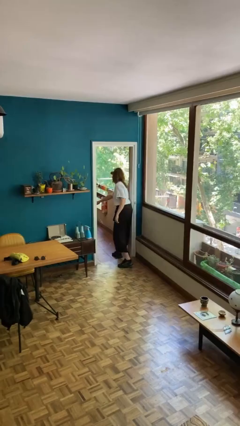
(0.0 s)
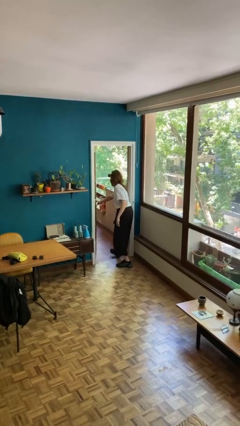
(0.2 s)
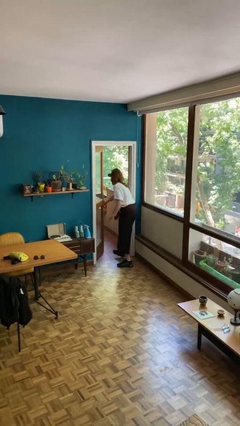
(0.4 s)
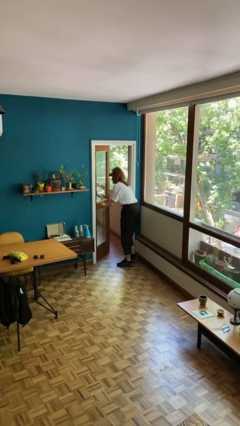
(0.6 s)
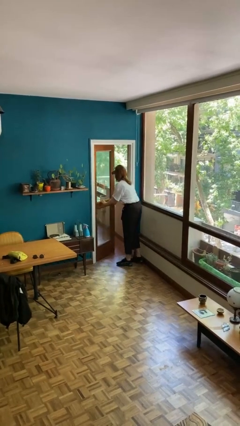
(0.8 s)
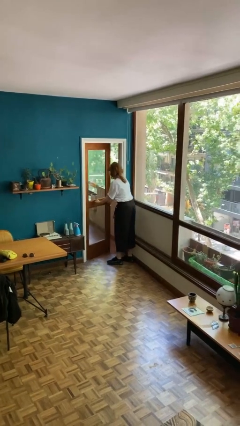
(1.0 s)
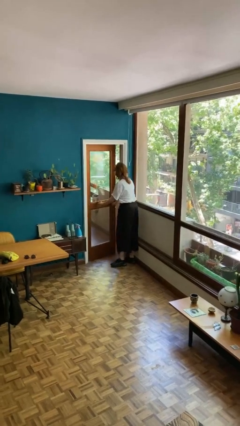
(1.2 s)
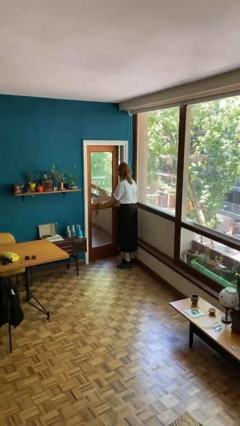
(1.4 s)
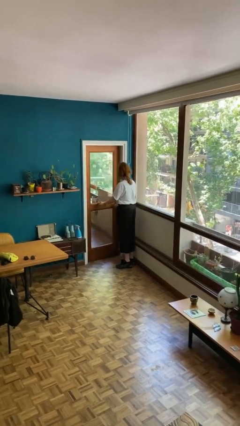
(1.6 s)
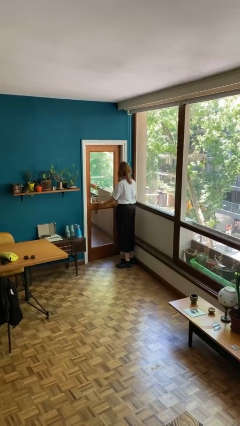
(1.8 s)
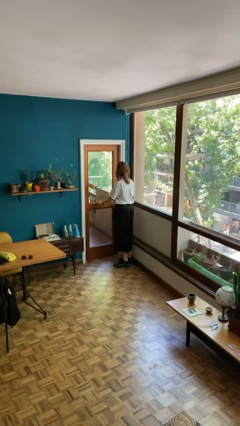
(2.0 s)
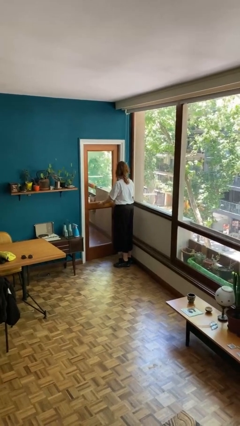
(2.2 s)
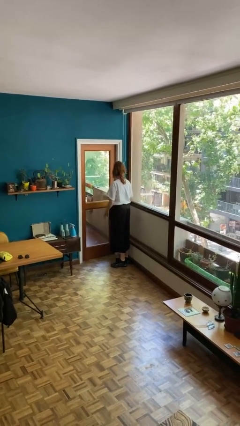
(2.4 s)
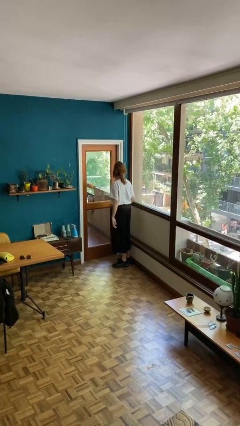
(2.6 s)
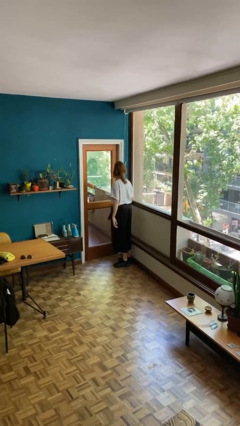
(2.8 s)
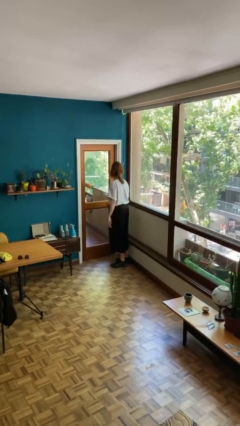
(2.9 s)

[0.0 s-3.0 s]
person closes facility door

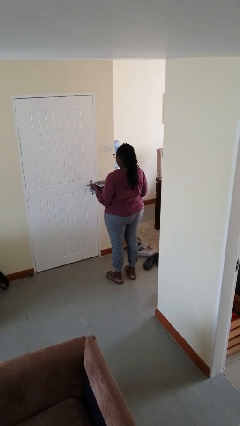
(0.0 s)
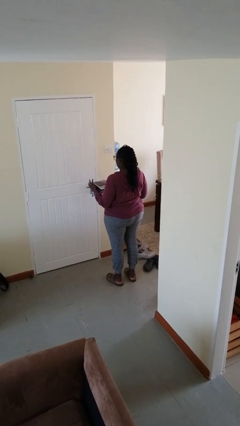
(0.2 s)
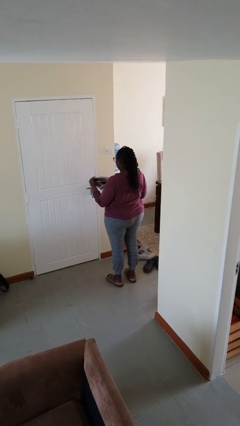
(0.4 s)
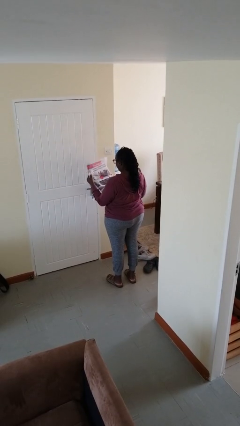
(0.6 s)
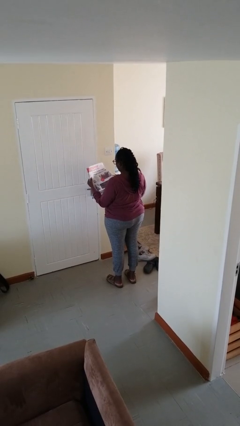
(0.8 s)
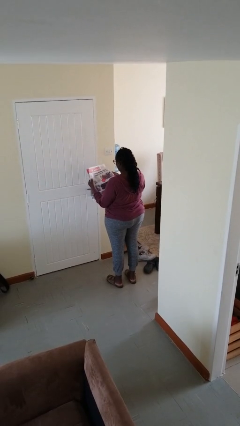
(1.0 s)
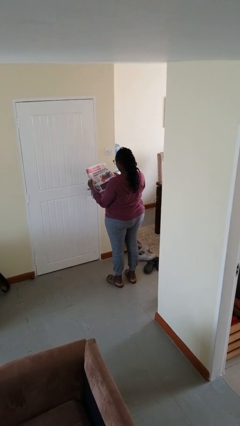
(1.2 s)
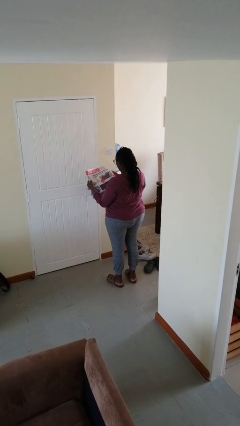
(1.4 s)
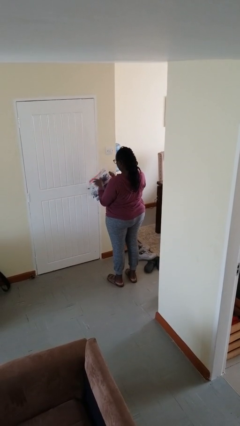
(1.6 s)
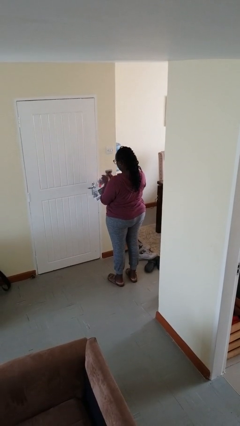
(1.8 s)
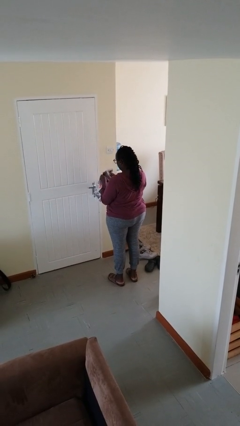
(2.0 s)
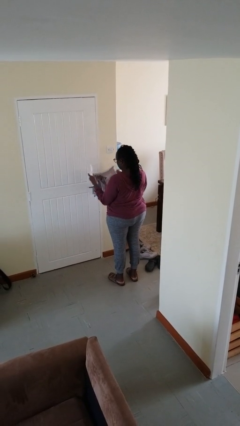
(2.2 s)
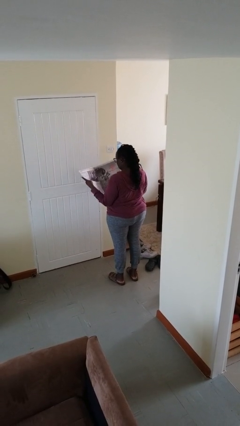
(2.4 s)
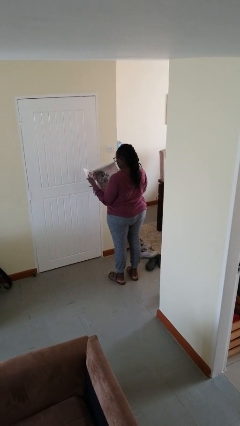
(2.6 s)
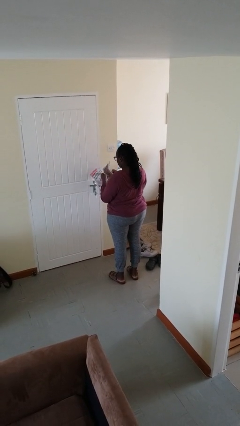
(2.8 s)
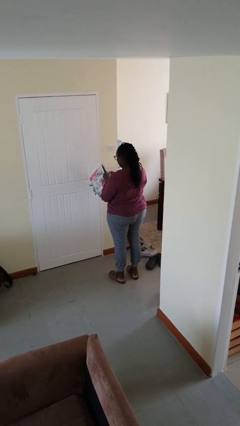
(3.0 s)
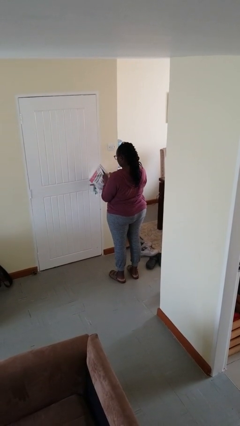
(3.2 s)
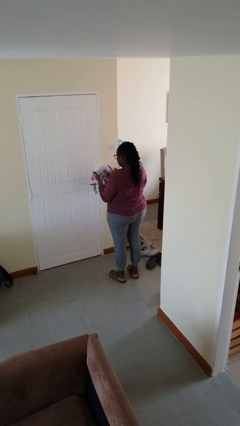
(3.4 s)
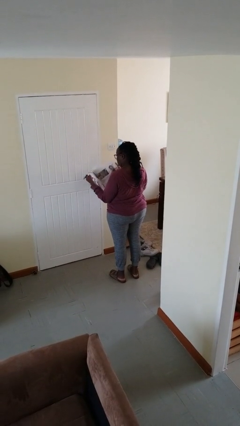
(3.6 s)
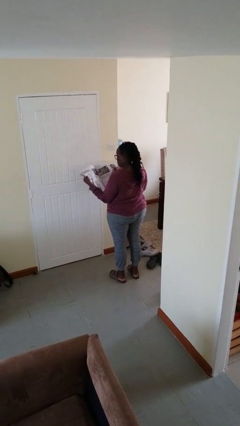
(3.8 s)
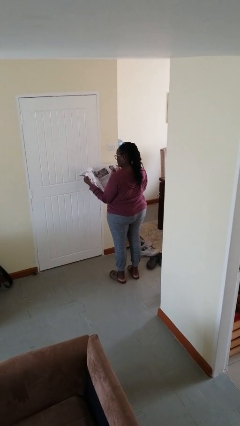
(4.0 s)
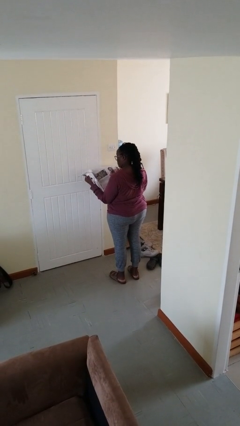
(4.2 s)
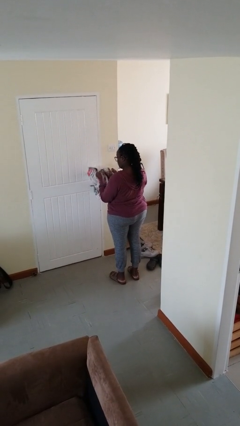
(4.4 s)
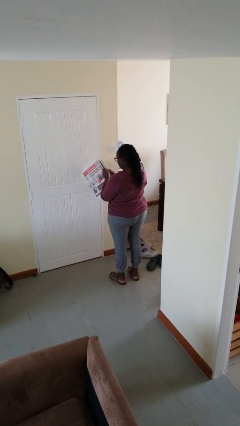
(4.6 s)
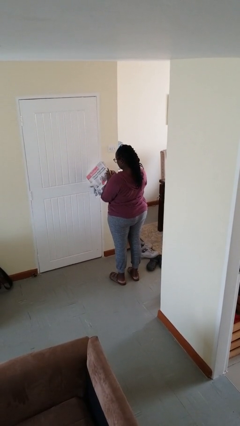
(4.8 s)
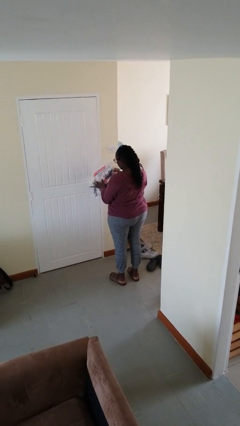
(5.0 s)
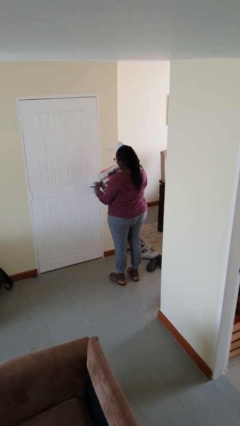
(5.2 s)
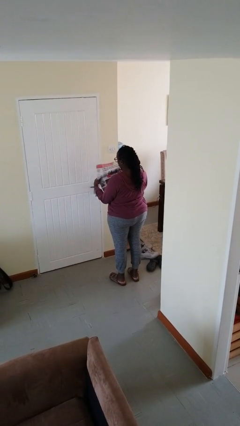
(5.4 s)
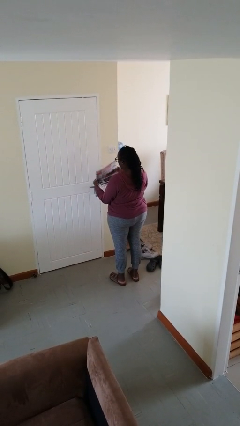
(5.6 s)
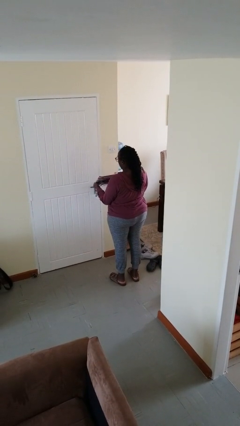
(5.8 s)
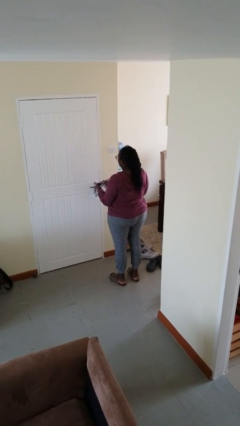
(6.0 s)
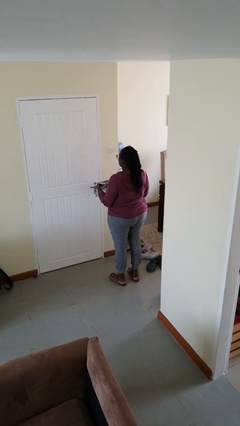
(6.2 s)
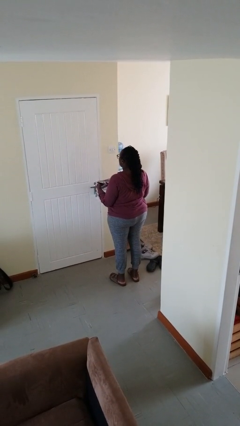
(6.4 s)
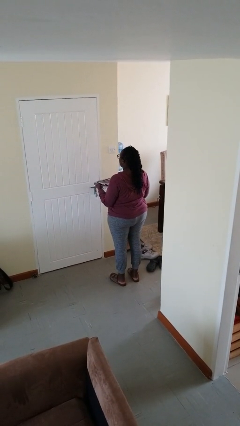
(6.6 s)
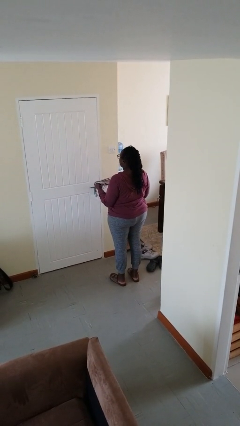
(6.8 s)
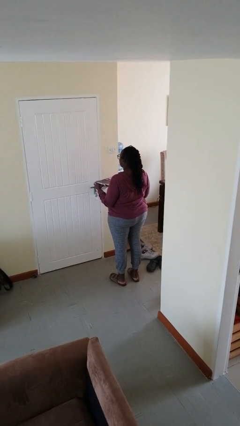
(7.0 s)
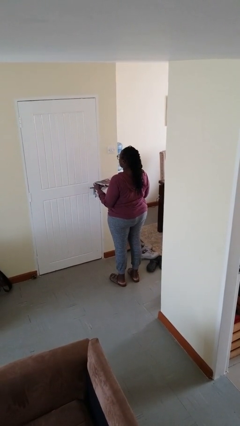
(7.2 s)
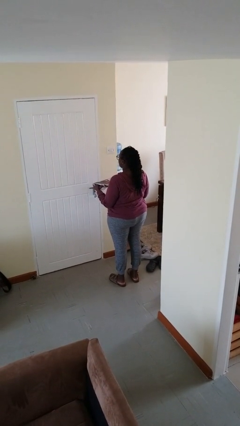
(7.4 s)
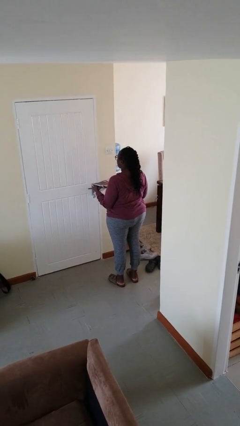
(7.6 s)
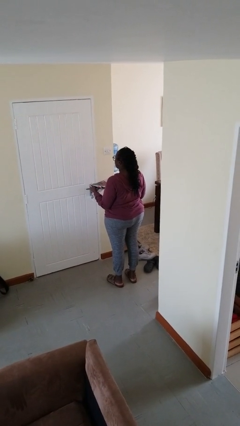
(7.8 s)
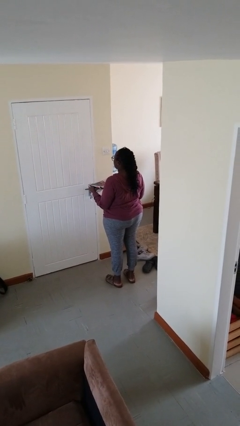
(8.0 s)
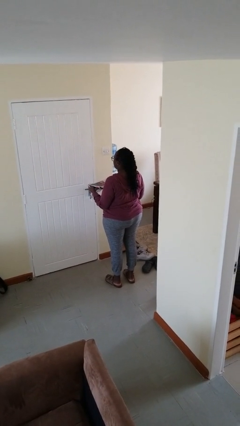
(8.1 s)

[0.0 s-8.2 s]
person reads newspaper

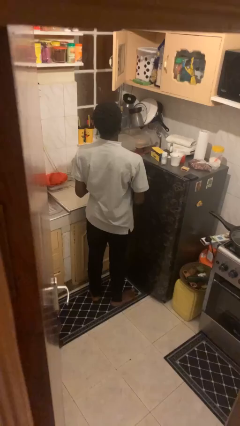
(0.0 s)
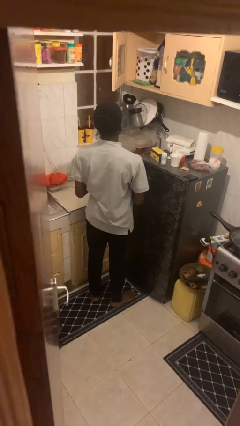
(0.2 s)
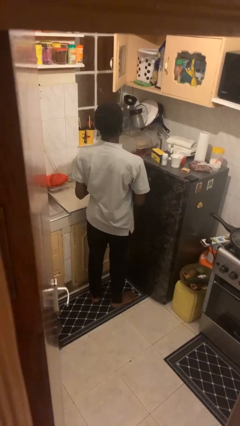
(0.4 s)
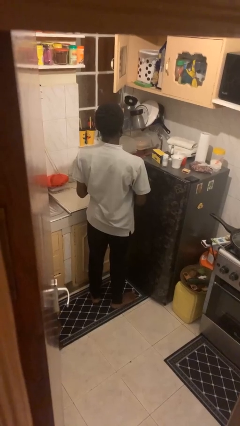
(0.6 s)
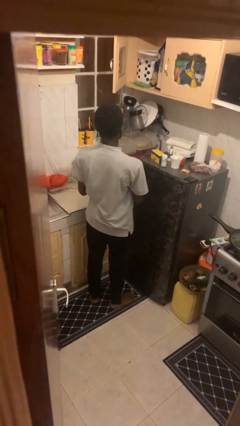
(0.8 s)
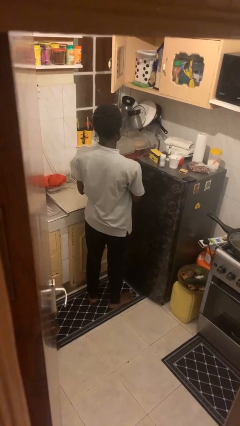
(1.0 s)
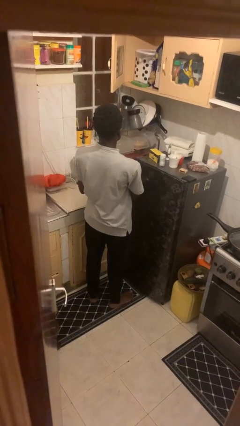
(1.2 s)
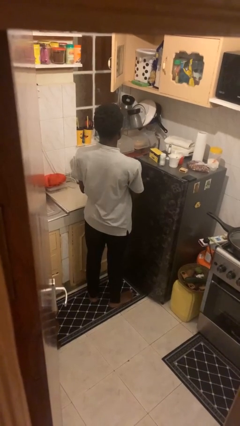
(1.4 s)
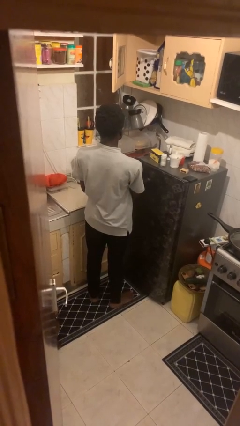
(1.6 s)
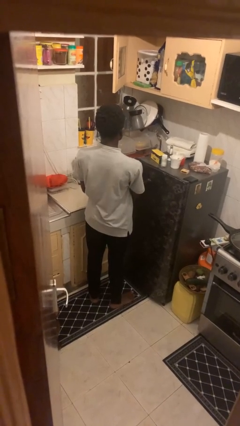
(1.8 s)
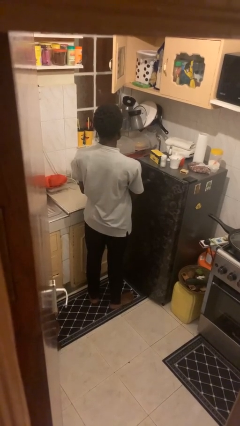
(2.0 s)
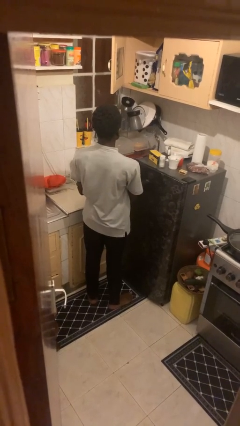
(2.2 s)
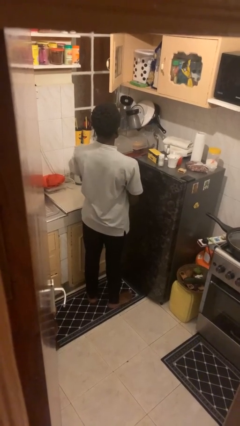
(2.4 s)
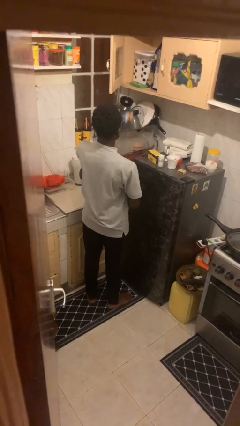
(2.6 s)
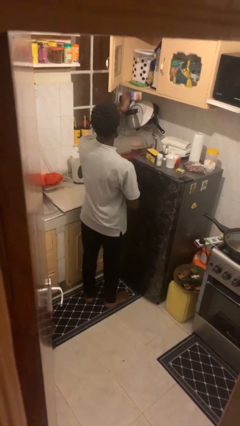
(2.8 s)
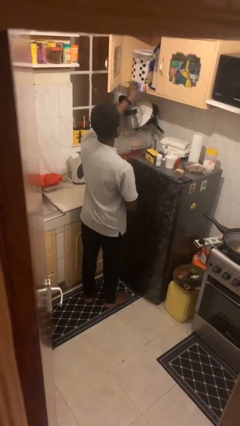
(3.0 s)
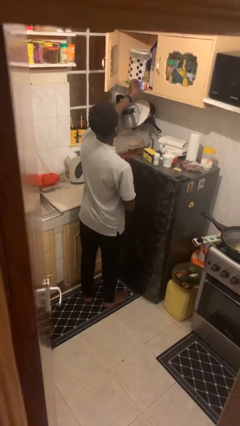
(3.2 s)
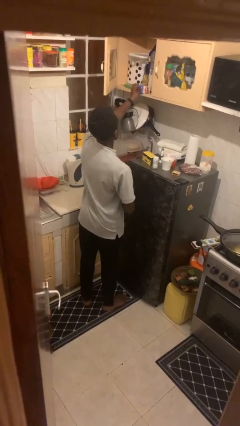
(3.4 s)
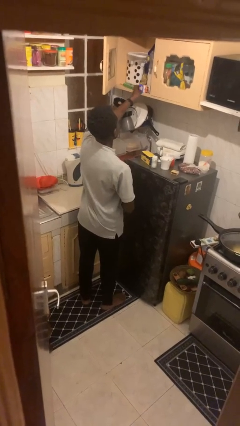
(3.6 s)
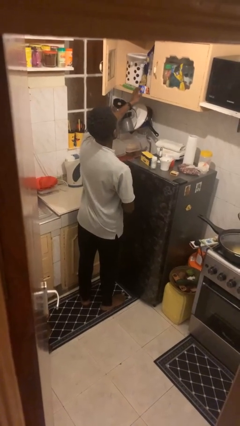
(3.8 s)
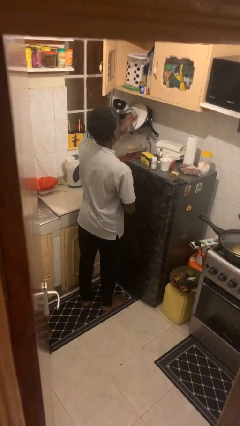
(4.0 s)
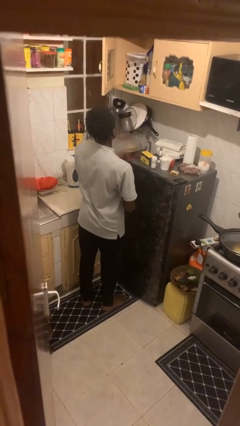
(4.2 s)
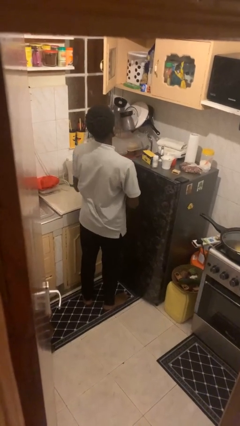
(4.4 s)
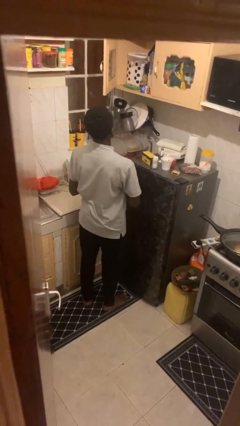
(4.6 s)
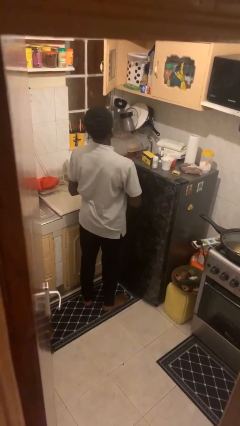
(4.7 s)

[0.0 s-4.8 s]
person puts down object into cabinet

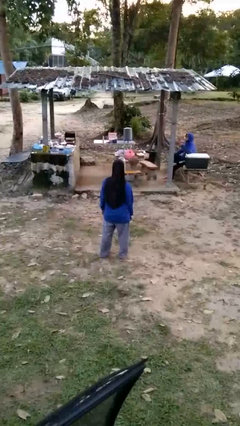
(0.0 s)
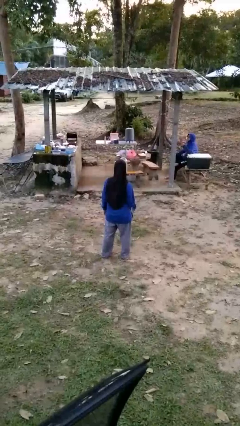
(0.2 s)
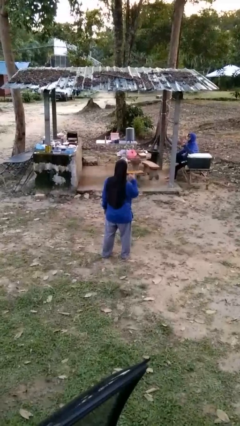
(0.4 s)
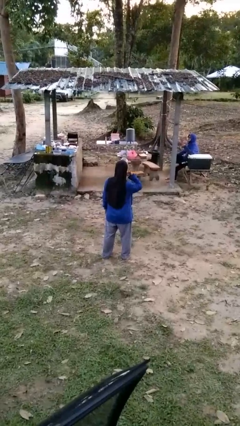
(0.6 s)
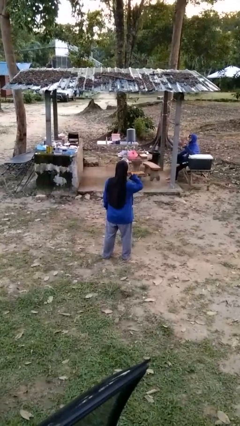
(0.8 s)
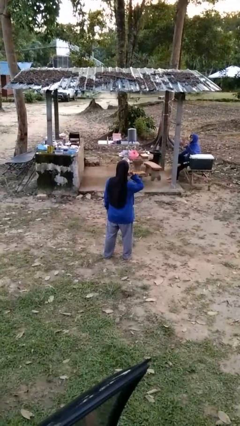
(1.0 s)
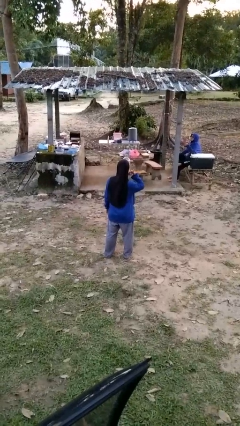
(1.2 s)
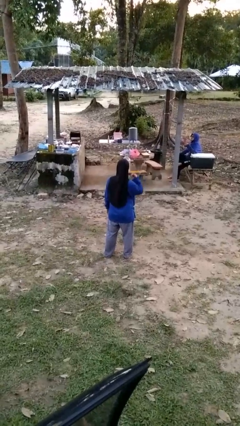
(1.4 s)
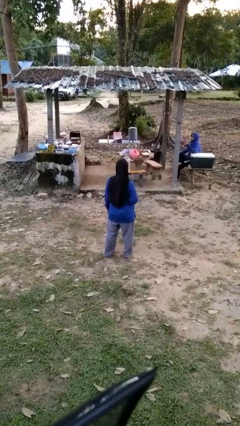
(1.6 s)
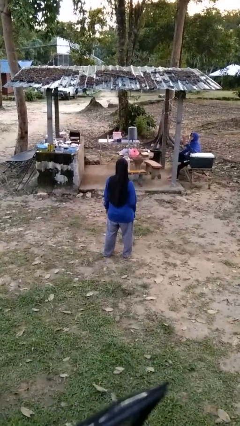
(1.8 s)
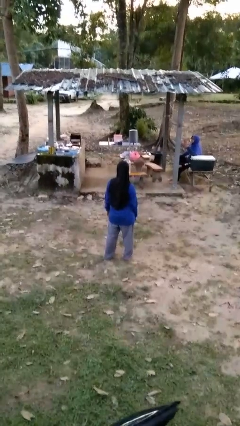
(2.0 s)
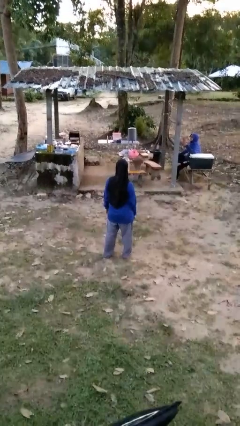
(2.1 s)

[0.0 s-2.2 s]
person gestures call me
